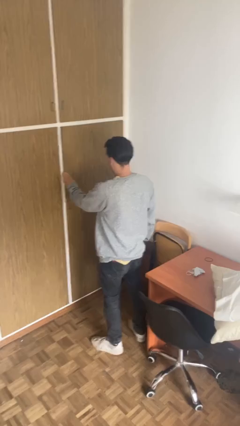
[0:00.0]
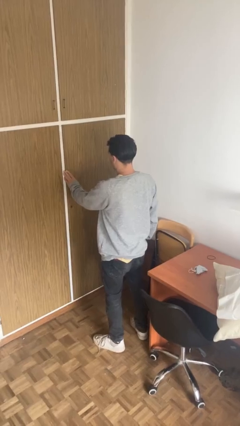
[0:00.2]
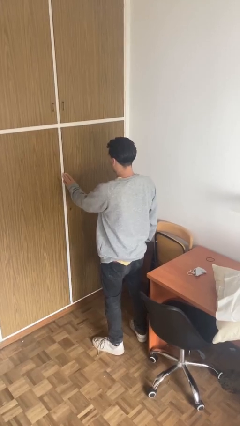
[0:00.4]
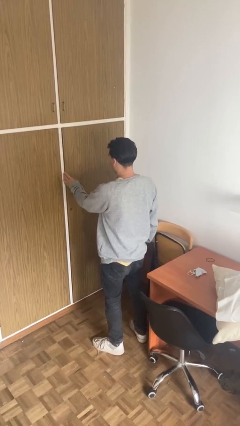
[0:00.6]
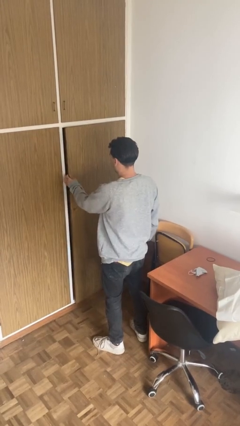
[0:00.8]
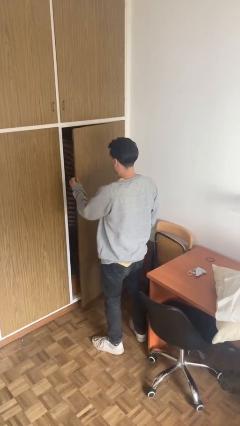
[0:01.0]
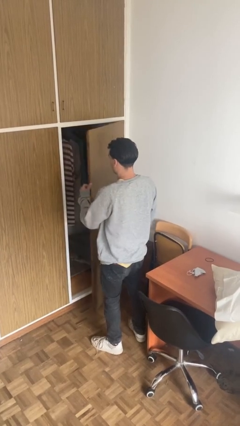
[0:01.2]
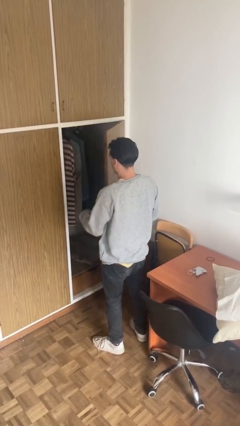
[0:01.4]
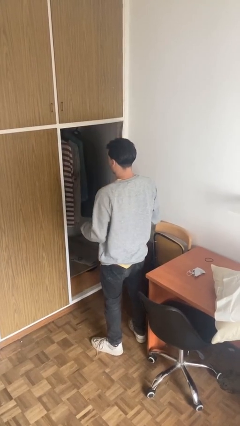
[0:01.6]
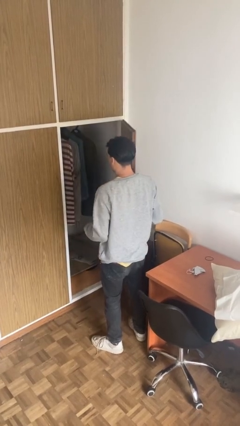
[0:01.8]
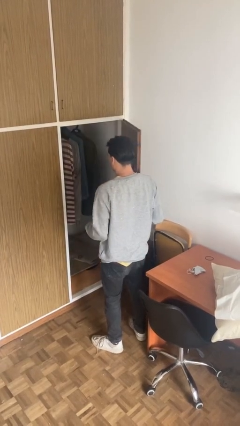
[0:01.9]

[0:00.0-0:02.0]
person opens closet door

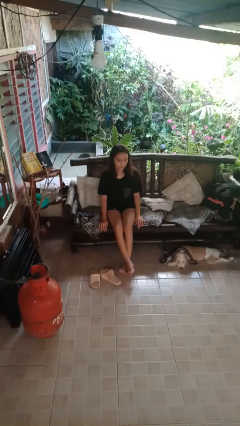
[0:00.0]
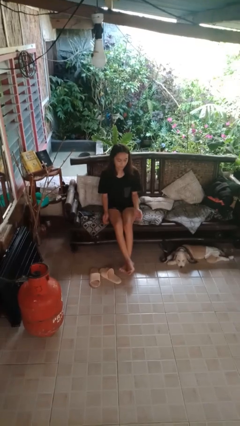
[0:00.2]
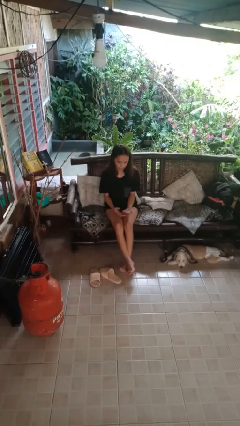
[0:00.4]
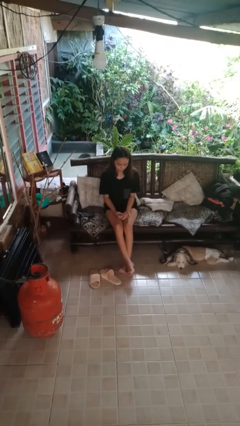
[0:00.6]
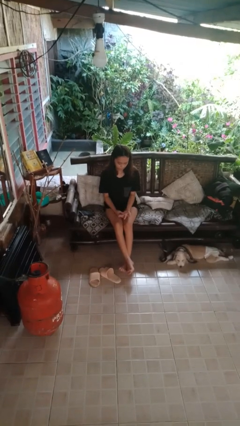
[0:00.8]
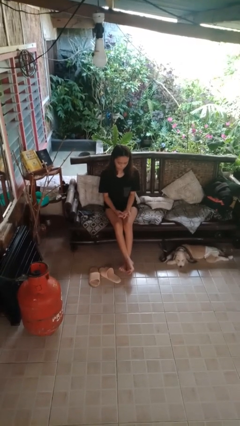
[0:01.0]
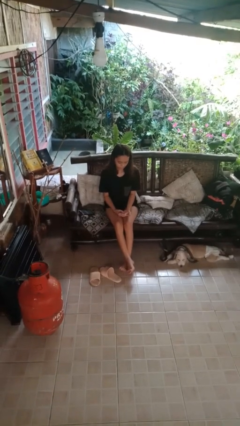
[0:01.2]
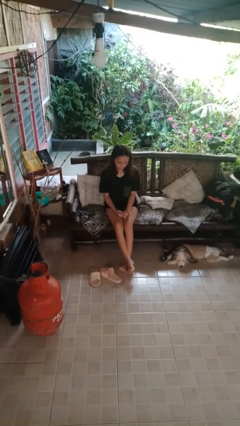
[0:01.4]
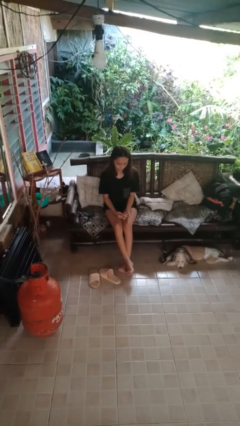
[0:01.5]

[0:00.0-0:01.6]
person looks at hands in lap

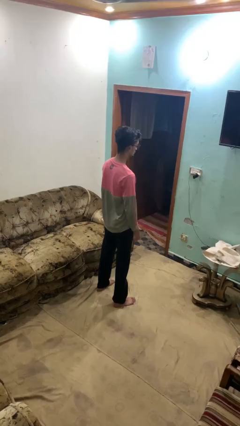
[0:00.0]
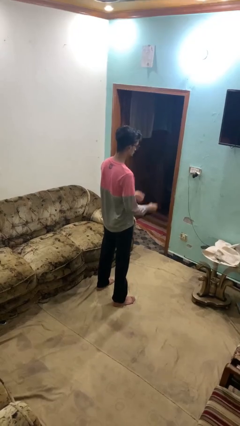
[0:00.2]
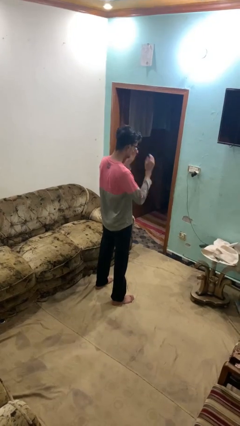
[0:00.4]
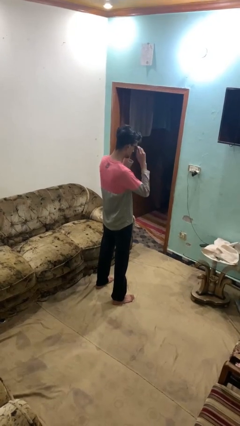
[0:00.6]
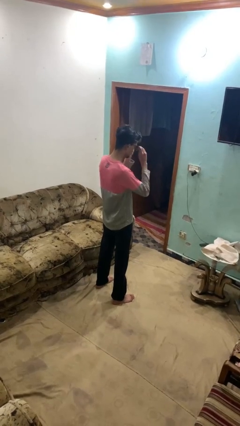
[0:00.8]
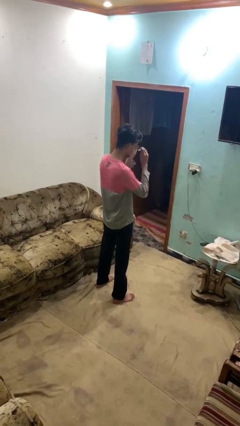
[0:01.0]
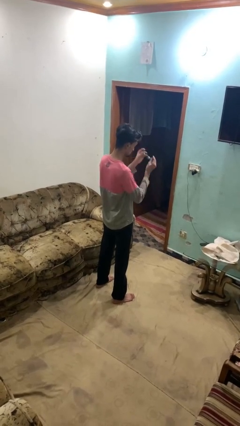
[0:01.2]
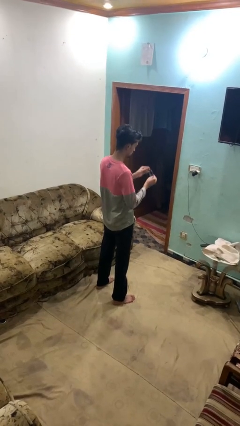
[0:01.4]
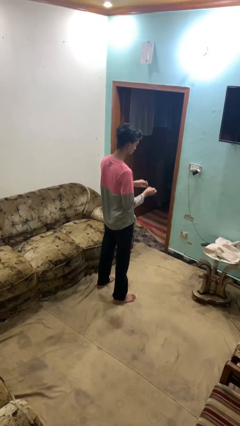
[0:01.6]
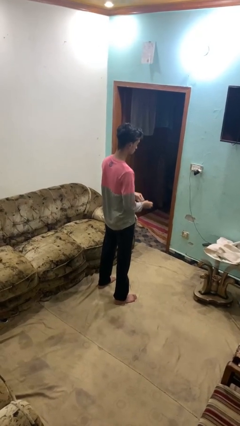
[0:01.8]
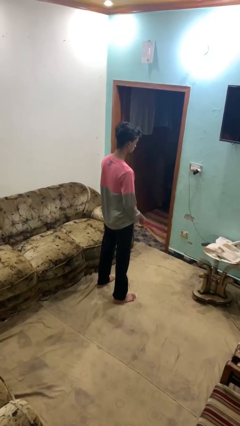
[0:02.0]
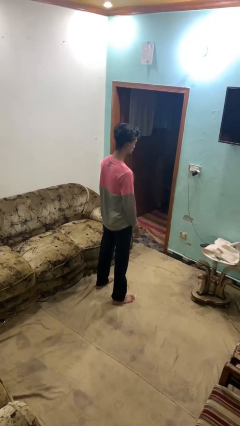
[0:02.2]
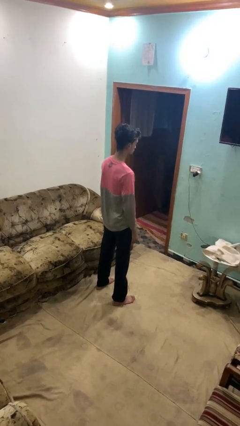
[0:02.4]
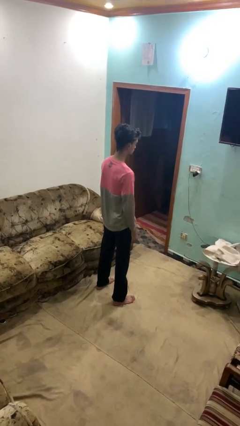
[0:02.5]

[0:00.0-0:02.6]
person takes off glasses

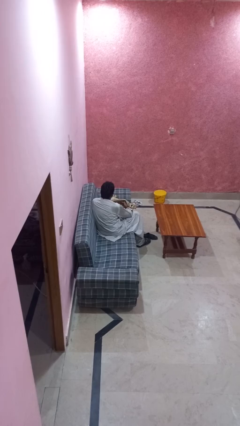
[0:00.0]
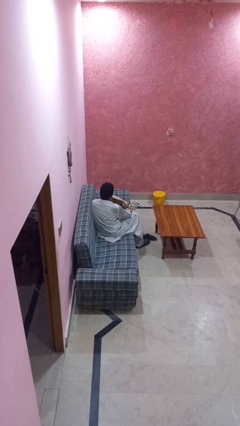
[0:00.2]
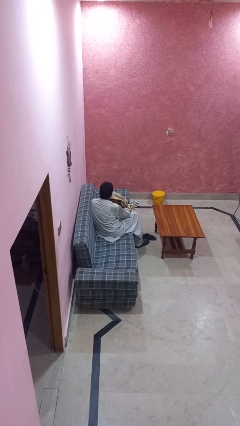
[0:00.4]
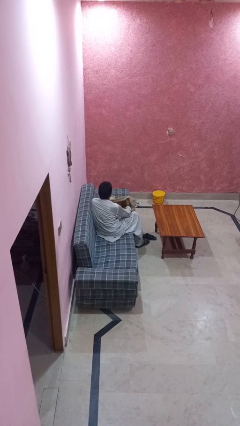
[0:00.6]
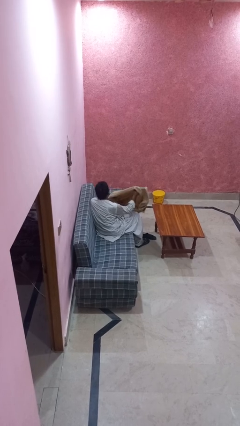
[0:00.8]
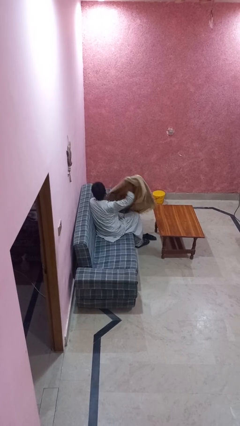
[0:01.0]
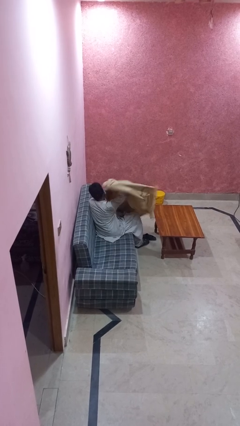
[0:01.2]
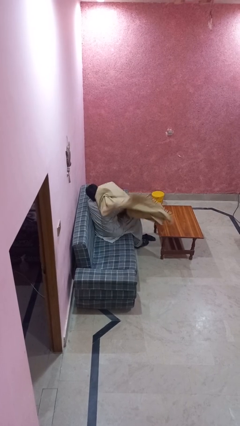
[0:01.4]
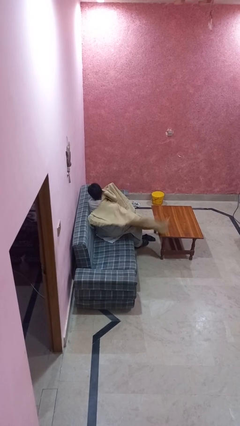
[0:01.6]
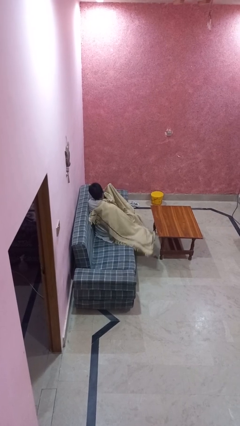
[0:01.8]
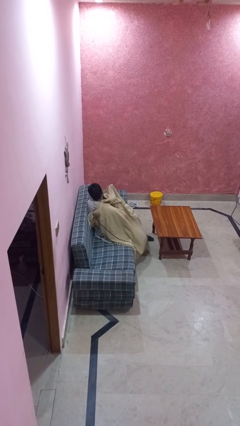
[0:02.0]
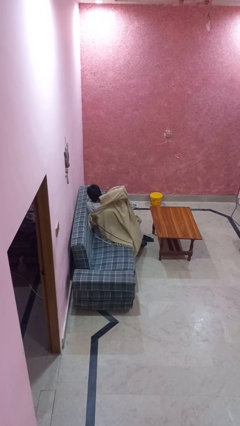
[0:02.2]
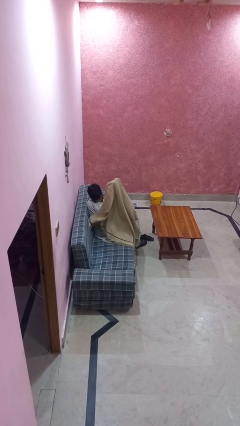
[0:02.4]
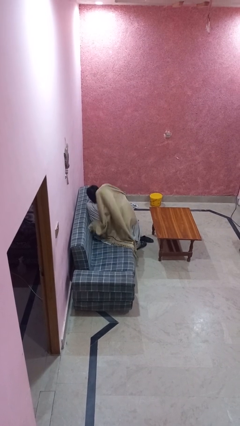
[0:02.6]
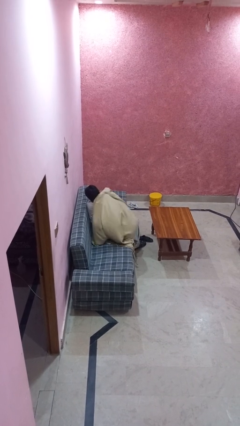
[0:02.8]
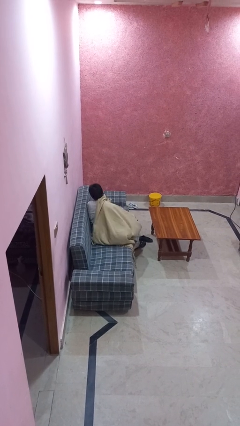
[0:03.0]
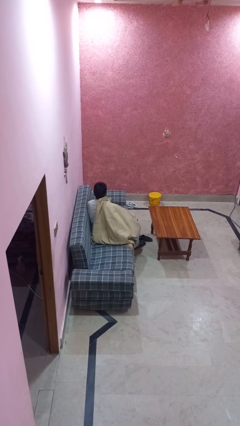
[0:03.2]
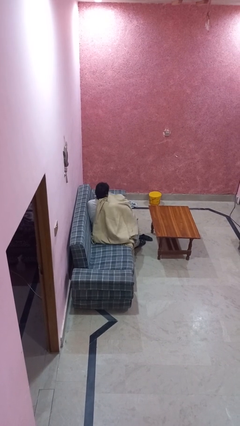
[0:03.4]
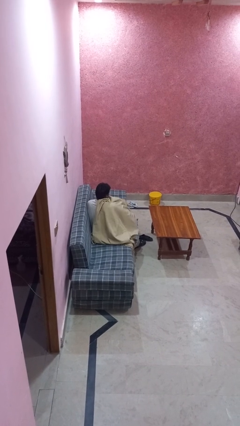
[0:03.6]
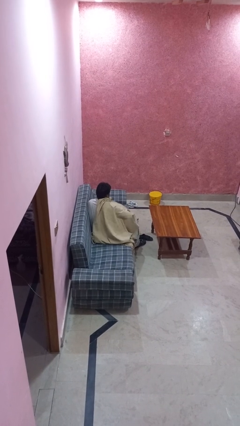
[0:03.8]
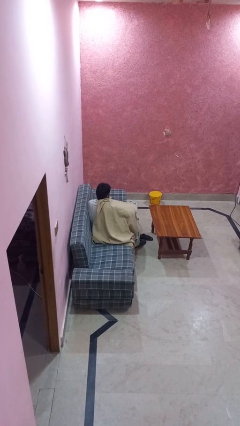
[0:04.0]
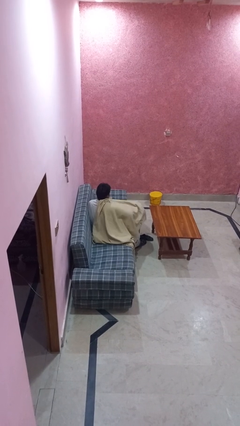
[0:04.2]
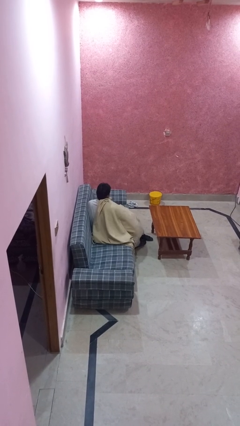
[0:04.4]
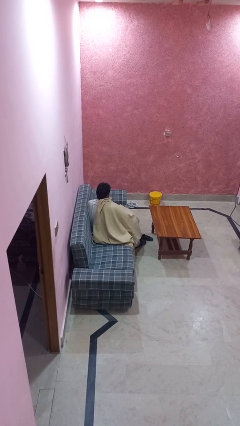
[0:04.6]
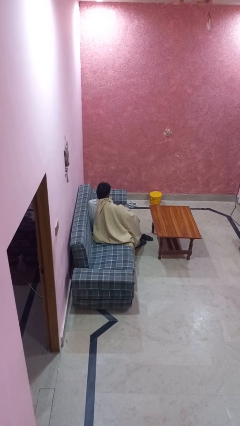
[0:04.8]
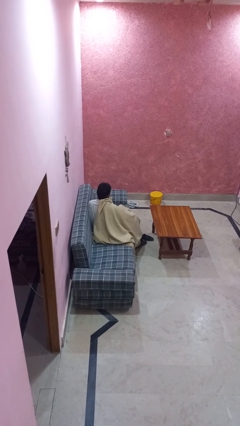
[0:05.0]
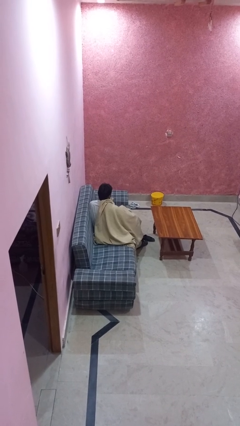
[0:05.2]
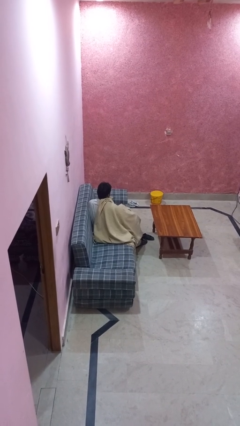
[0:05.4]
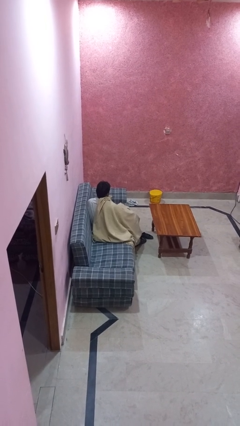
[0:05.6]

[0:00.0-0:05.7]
person covers with blanket

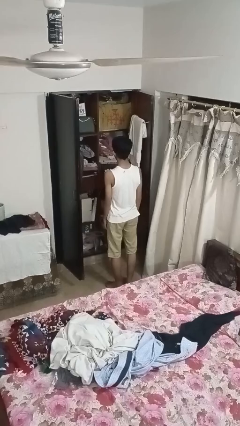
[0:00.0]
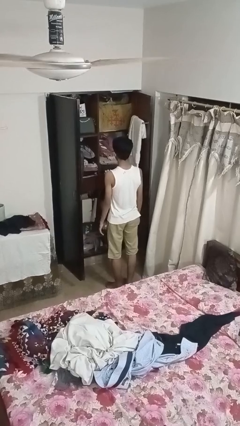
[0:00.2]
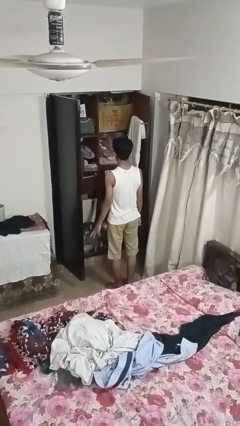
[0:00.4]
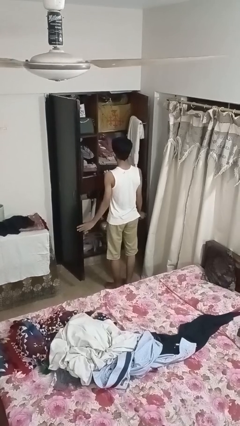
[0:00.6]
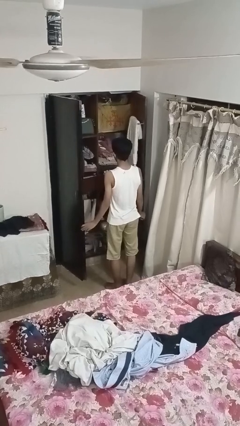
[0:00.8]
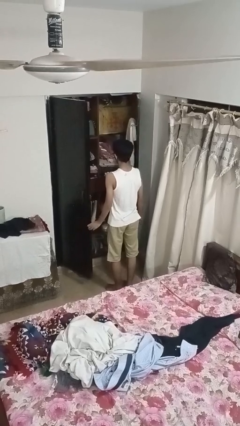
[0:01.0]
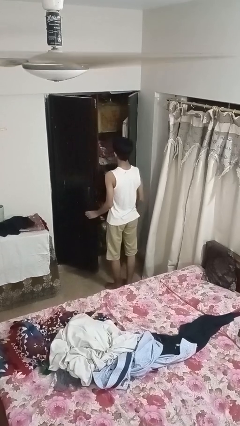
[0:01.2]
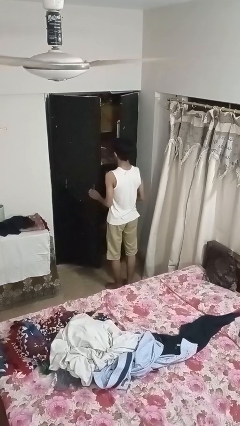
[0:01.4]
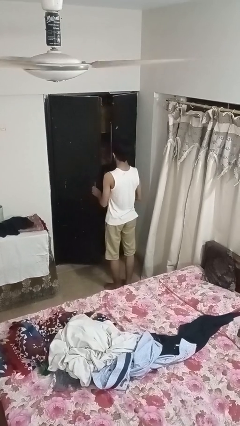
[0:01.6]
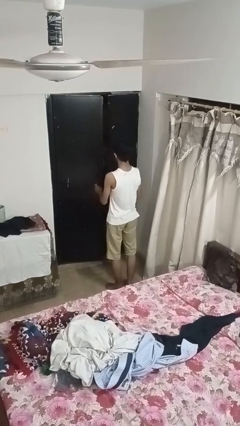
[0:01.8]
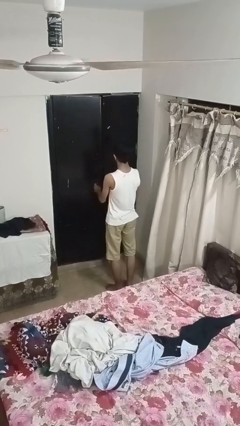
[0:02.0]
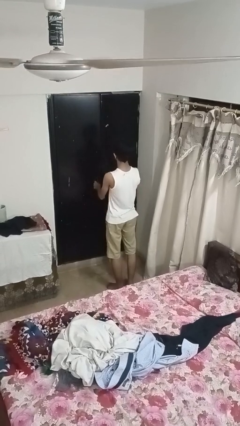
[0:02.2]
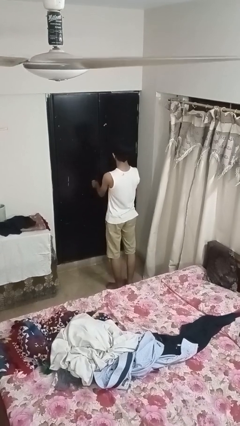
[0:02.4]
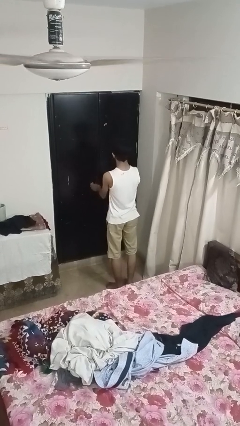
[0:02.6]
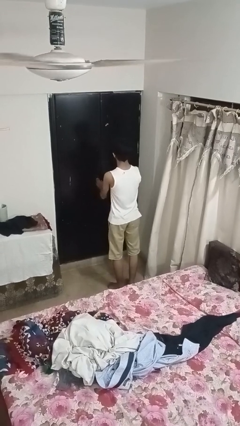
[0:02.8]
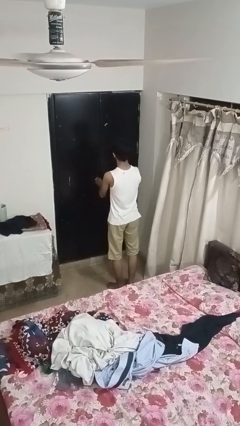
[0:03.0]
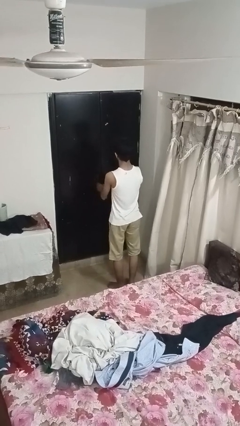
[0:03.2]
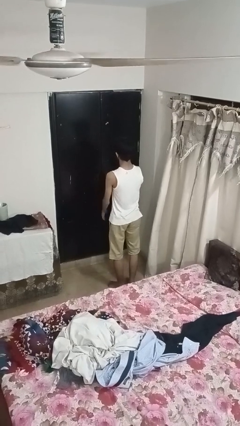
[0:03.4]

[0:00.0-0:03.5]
person closes closet door

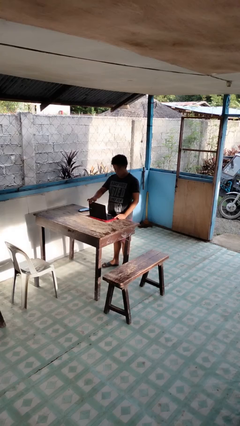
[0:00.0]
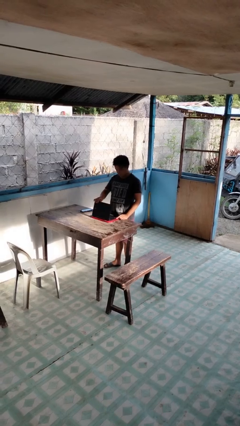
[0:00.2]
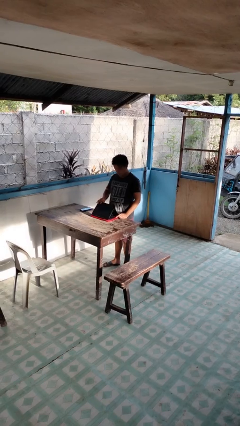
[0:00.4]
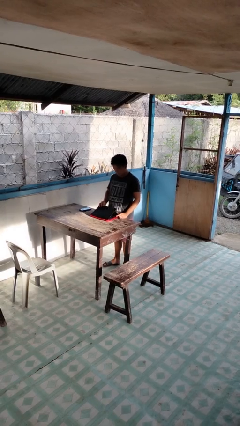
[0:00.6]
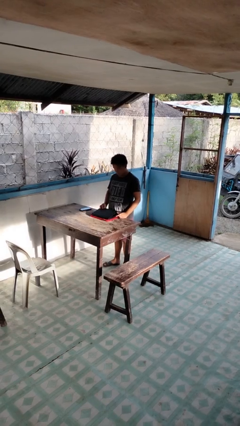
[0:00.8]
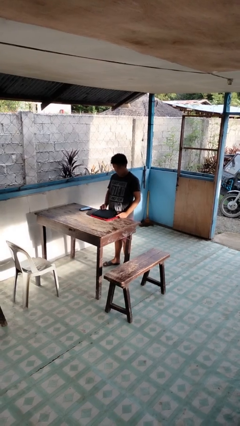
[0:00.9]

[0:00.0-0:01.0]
person closes laptop

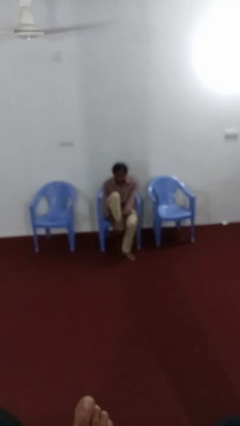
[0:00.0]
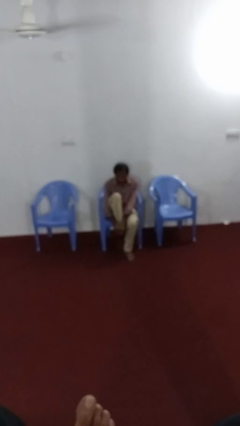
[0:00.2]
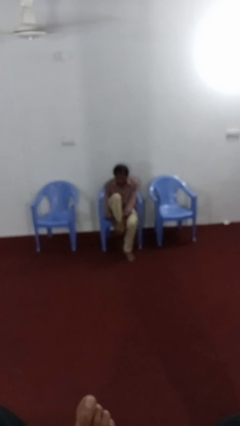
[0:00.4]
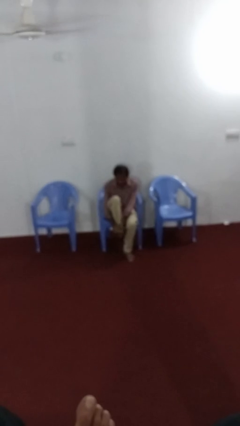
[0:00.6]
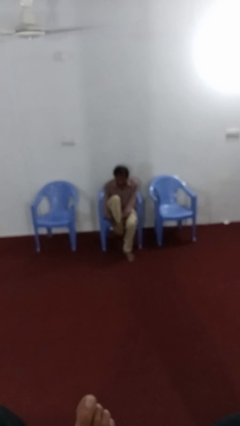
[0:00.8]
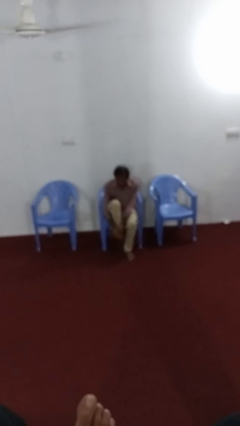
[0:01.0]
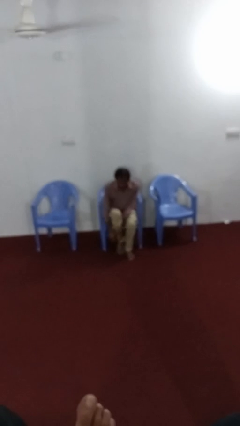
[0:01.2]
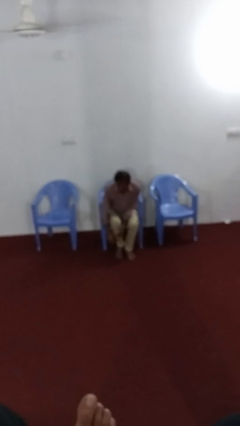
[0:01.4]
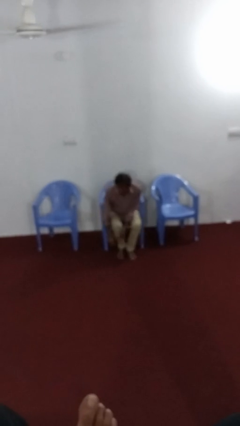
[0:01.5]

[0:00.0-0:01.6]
person stubs toe
